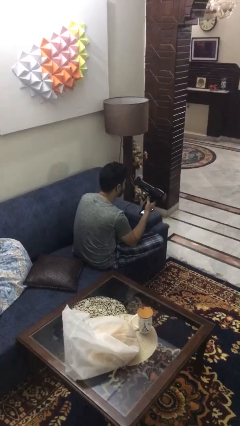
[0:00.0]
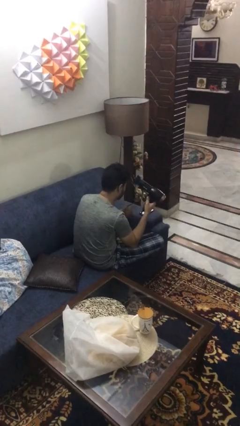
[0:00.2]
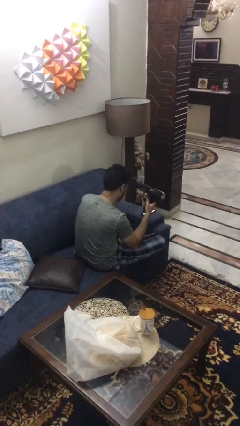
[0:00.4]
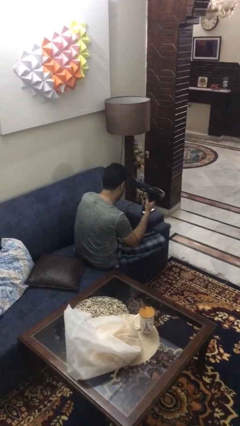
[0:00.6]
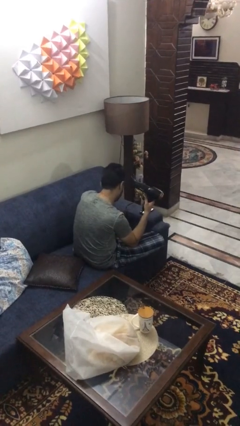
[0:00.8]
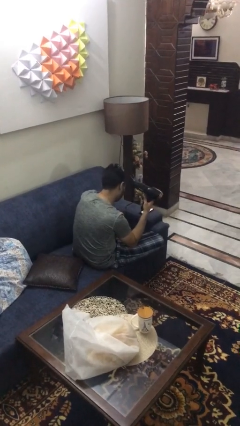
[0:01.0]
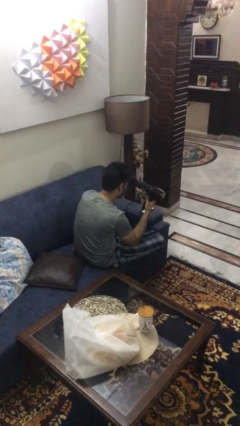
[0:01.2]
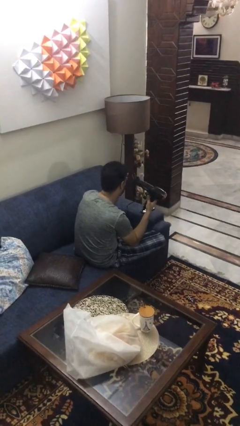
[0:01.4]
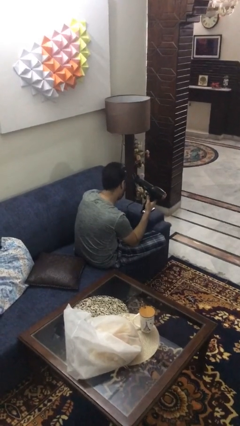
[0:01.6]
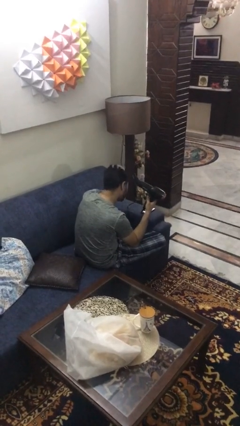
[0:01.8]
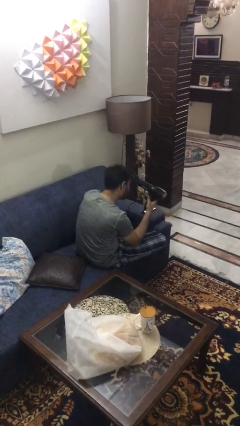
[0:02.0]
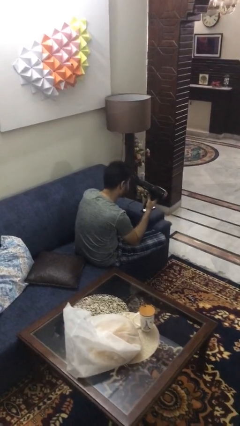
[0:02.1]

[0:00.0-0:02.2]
person dries hair with hairdryer

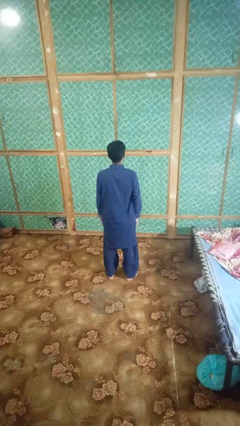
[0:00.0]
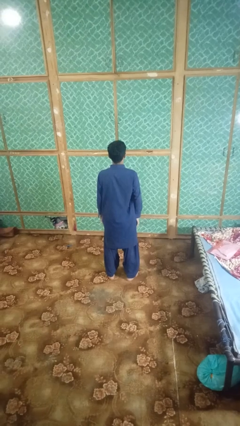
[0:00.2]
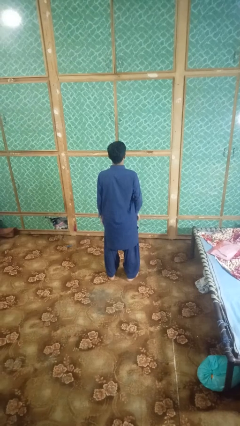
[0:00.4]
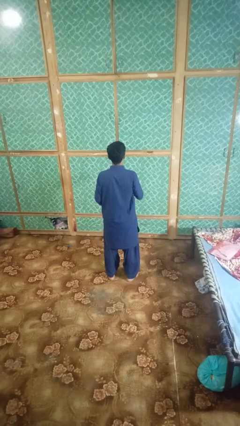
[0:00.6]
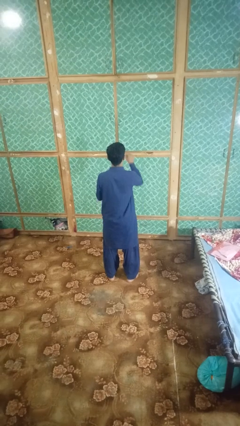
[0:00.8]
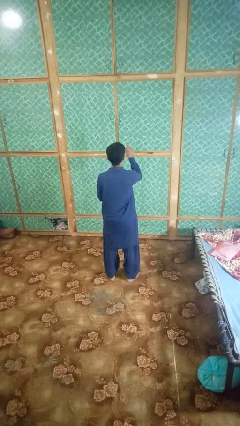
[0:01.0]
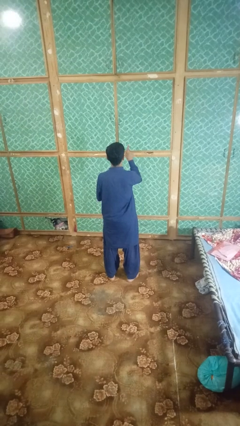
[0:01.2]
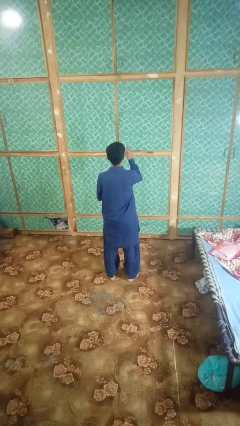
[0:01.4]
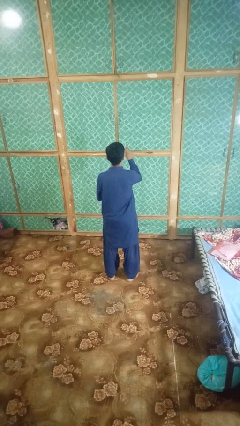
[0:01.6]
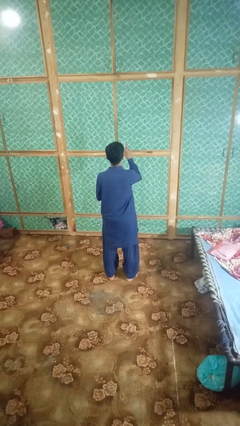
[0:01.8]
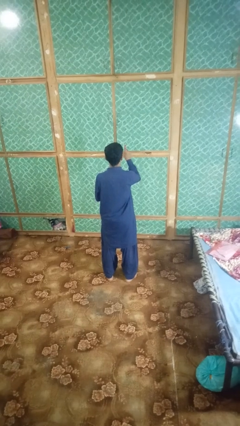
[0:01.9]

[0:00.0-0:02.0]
person gestures number one

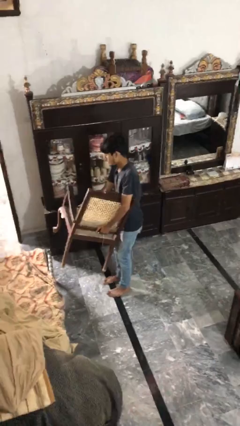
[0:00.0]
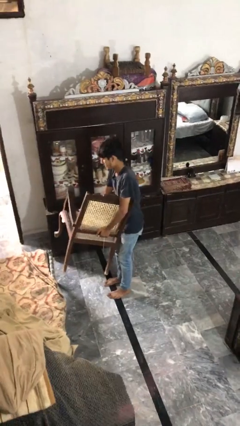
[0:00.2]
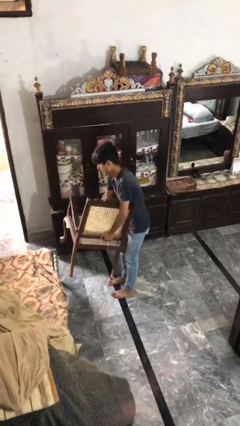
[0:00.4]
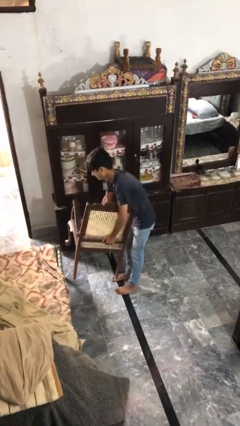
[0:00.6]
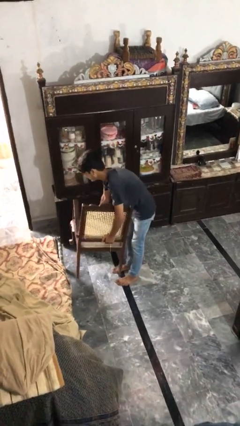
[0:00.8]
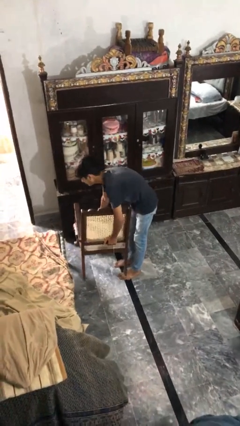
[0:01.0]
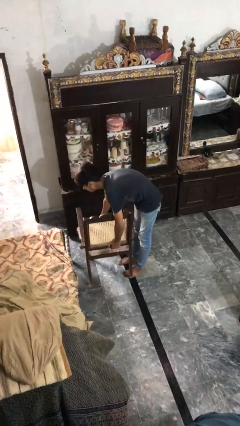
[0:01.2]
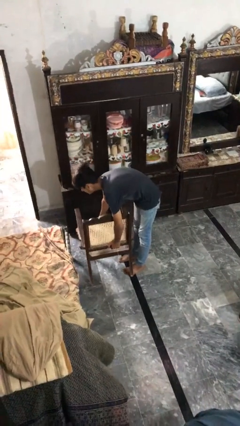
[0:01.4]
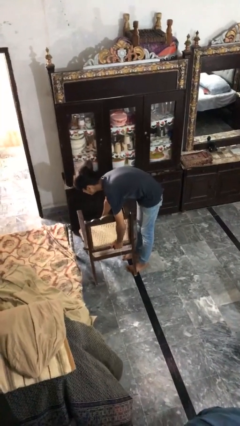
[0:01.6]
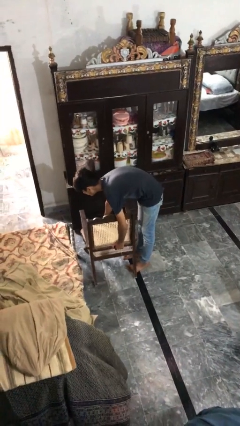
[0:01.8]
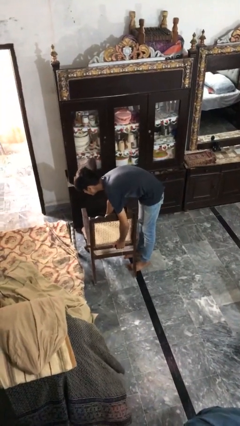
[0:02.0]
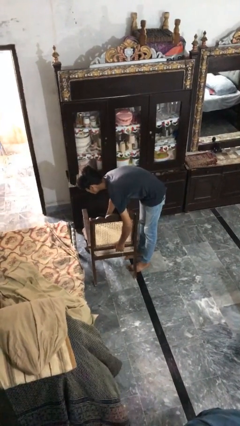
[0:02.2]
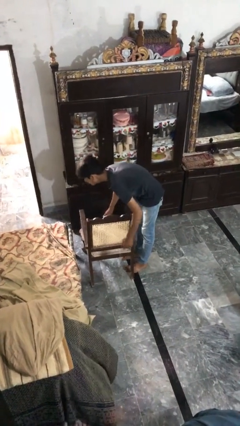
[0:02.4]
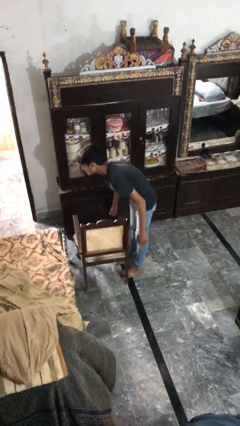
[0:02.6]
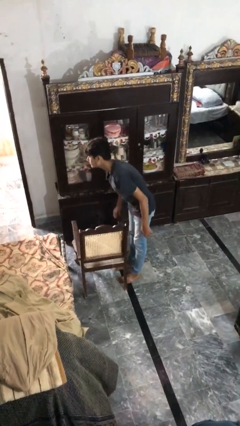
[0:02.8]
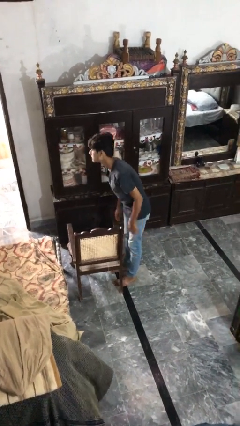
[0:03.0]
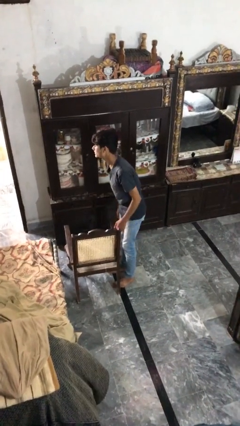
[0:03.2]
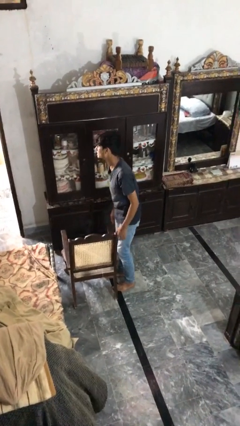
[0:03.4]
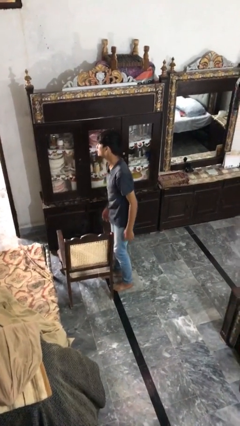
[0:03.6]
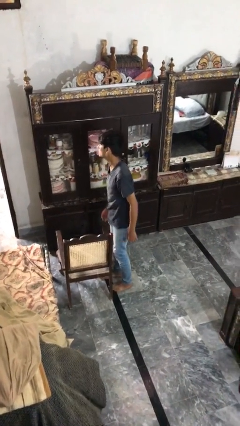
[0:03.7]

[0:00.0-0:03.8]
person puts down object on floor

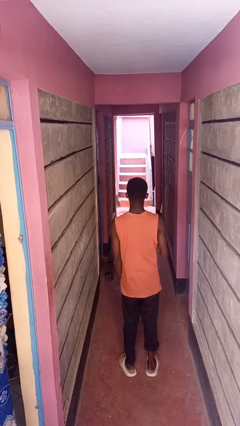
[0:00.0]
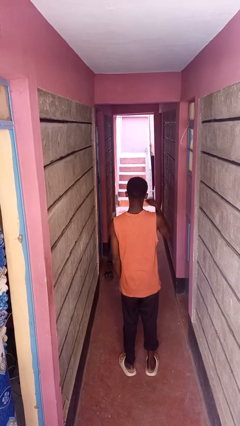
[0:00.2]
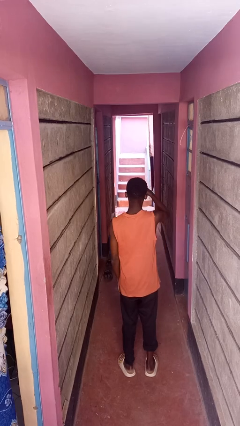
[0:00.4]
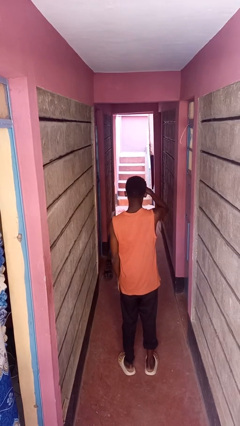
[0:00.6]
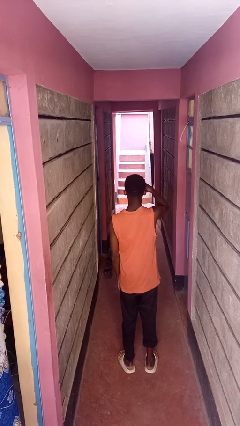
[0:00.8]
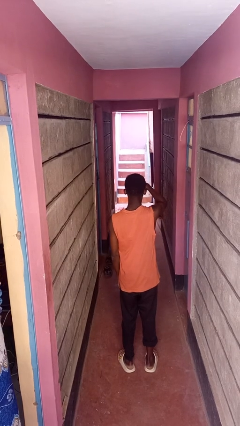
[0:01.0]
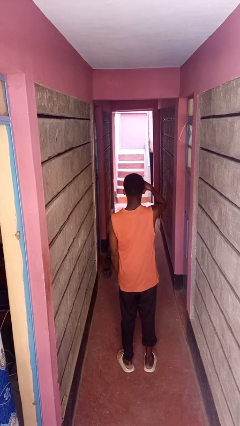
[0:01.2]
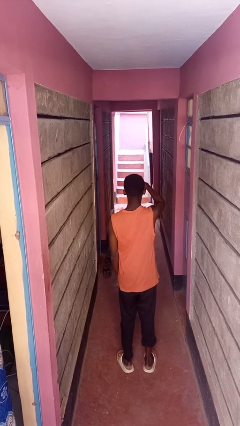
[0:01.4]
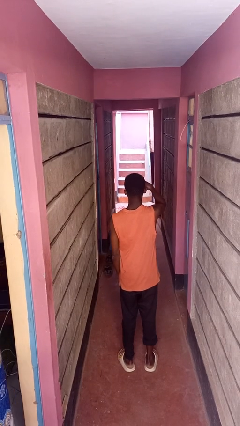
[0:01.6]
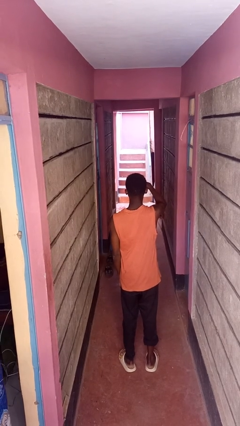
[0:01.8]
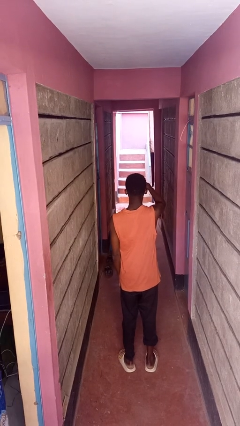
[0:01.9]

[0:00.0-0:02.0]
person rubs eyes

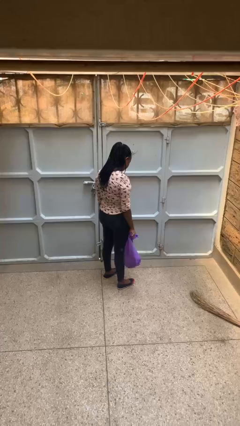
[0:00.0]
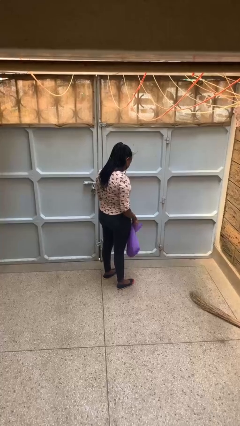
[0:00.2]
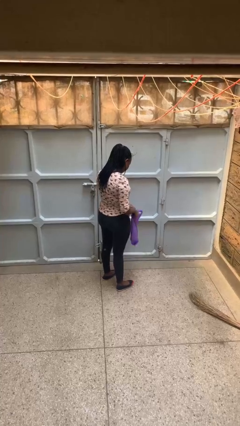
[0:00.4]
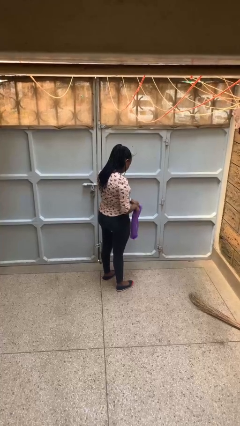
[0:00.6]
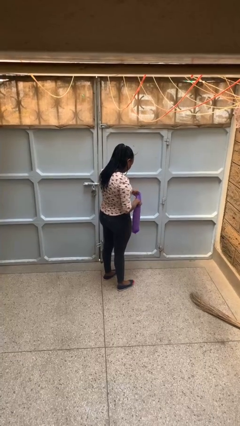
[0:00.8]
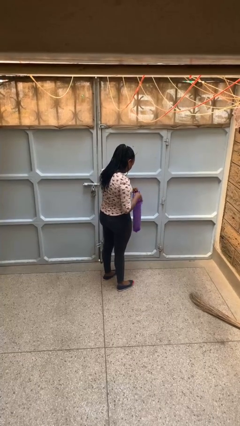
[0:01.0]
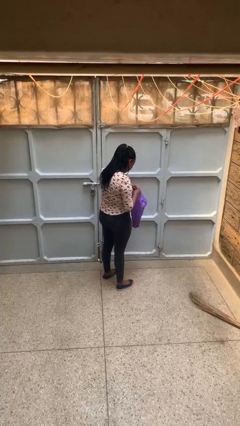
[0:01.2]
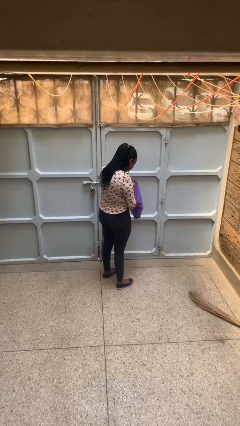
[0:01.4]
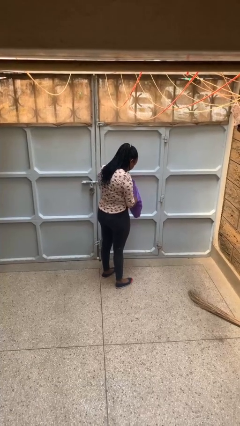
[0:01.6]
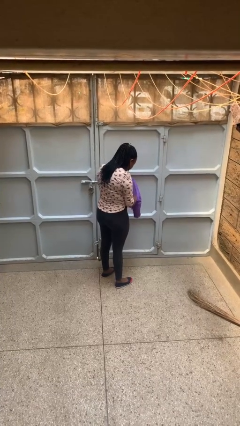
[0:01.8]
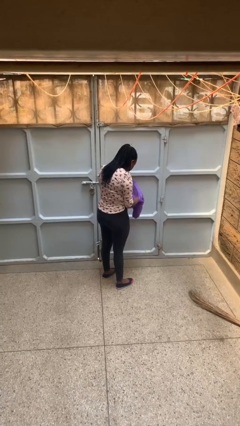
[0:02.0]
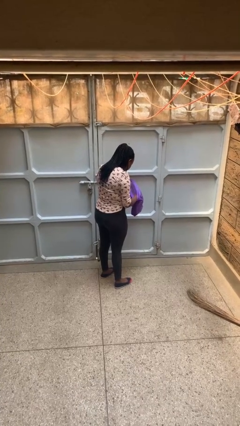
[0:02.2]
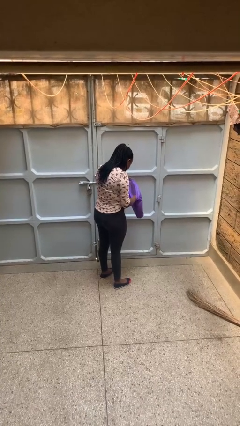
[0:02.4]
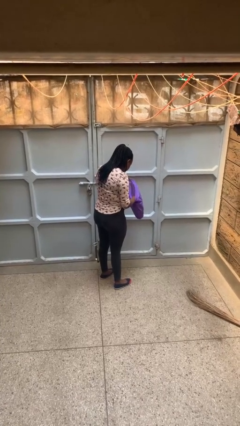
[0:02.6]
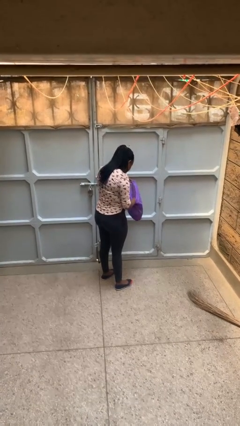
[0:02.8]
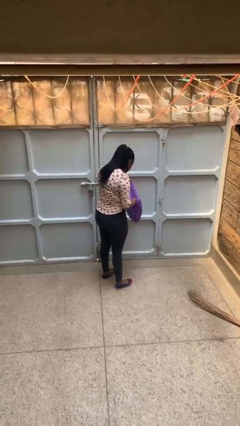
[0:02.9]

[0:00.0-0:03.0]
person searches in bag

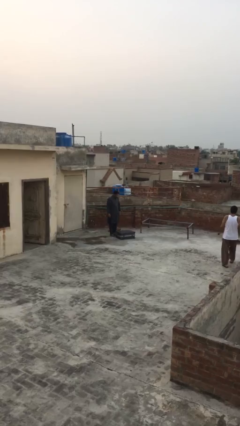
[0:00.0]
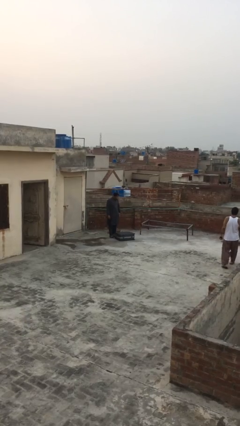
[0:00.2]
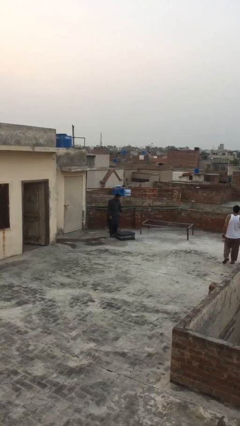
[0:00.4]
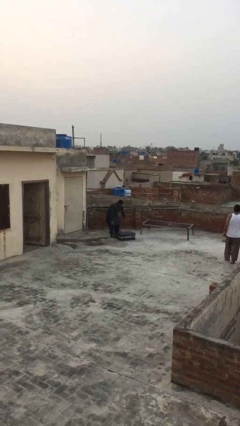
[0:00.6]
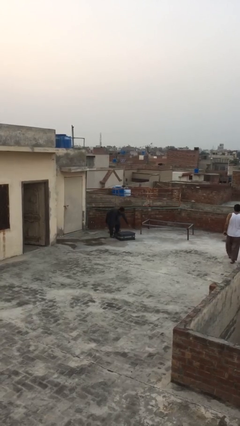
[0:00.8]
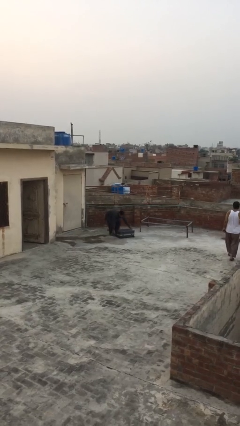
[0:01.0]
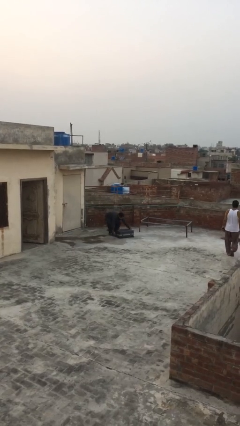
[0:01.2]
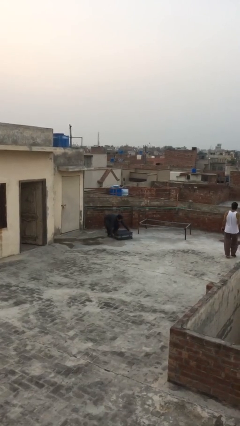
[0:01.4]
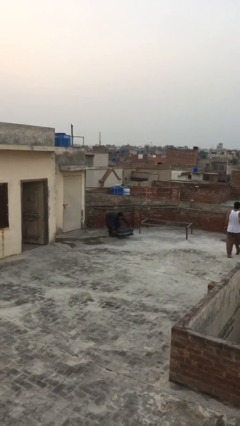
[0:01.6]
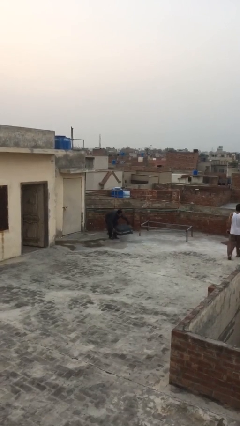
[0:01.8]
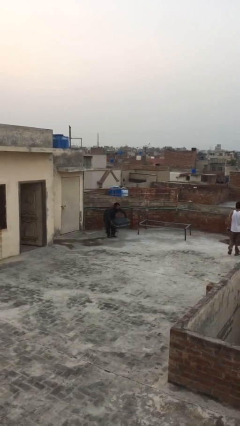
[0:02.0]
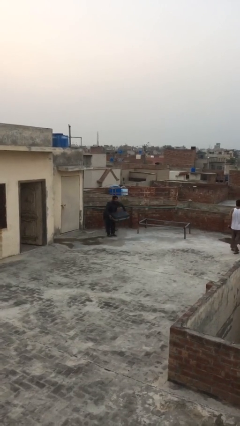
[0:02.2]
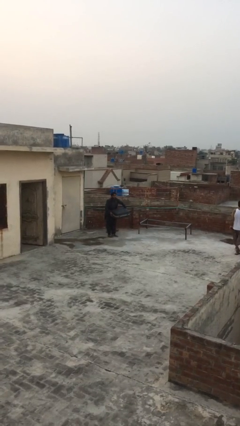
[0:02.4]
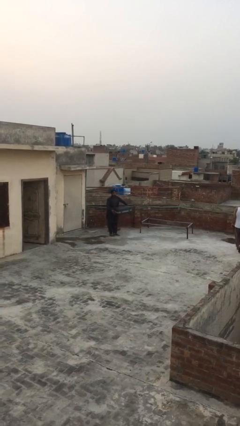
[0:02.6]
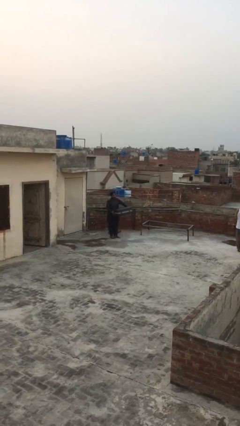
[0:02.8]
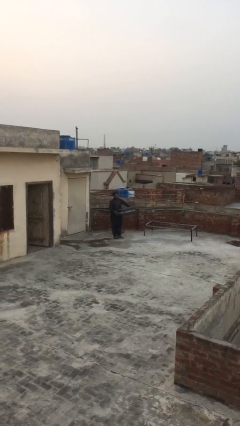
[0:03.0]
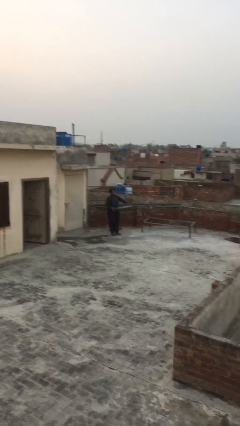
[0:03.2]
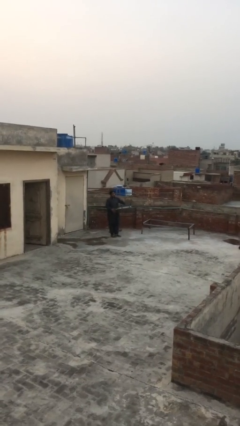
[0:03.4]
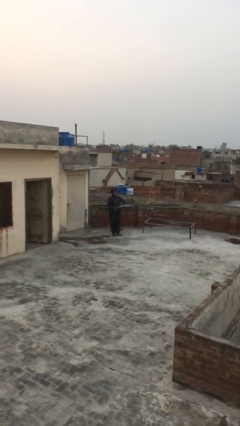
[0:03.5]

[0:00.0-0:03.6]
person picks up object from floor

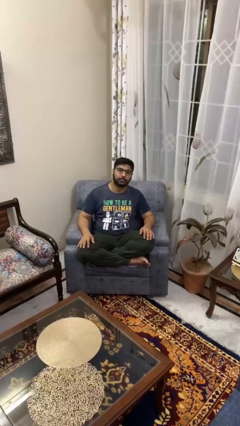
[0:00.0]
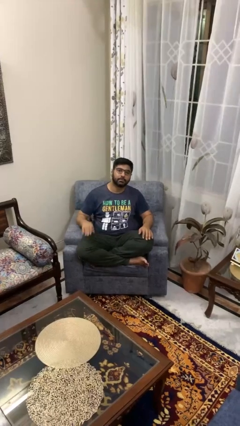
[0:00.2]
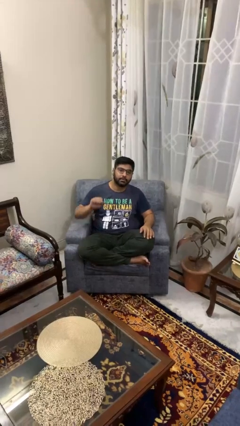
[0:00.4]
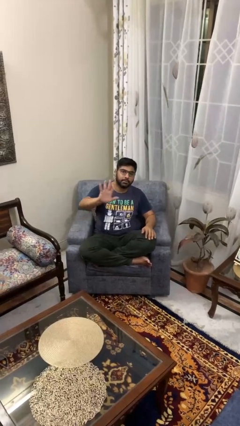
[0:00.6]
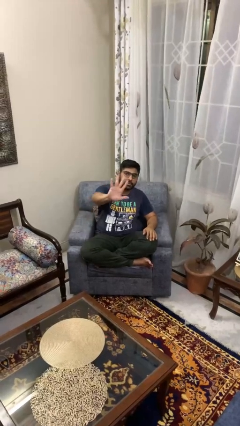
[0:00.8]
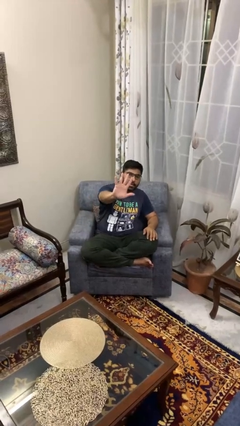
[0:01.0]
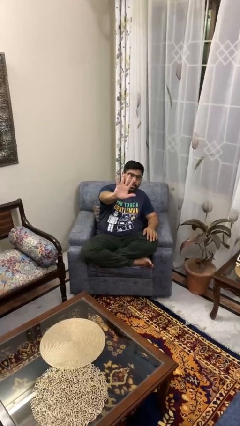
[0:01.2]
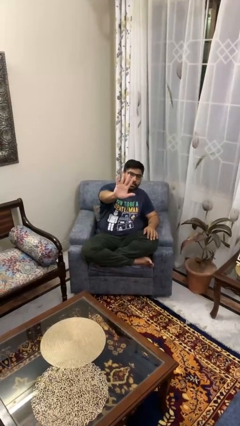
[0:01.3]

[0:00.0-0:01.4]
person gestures number five
